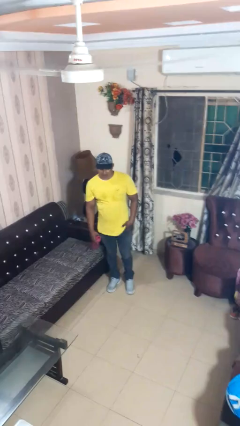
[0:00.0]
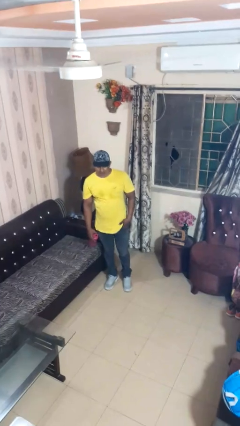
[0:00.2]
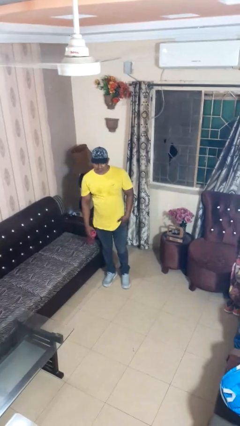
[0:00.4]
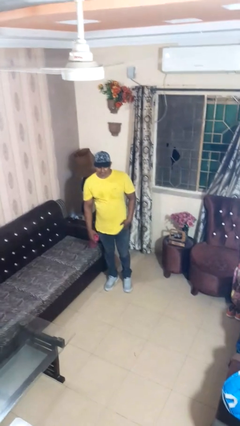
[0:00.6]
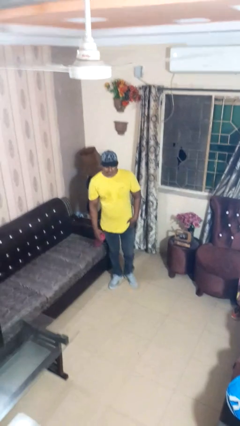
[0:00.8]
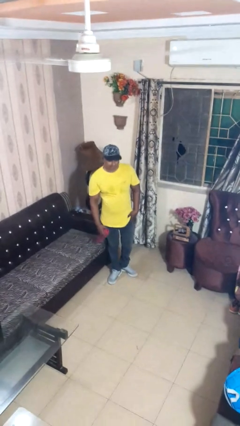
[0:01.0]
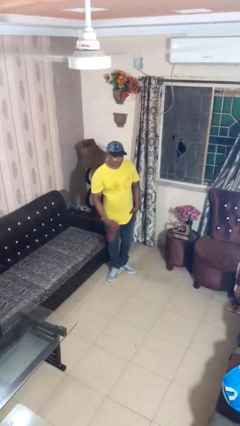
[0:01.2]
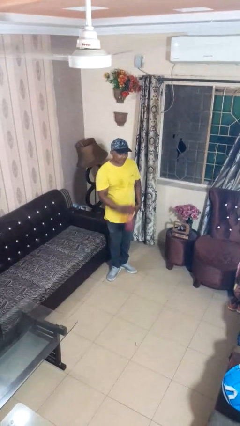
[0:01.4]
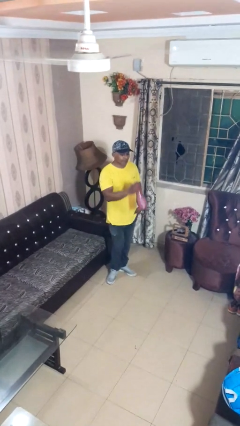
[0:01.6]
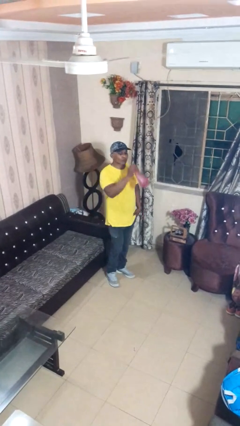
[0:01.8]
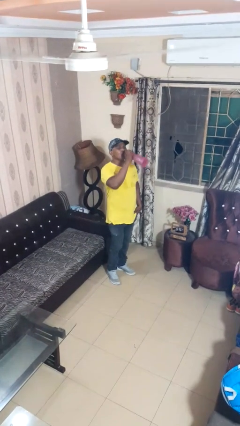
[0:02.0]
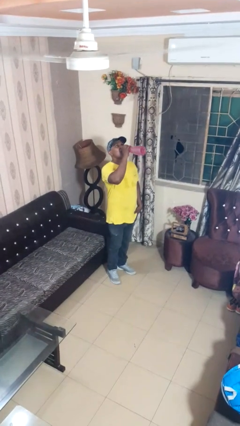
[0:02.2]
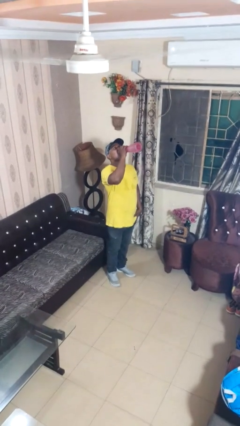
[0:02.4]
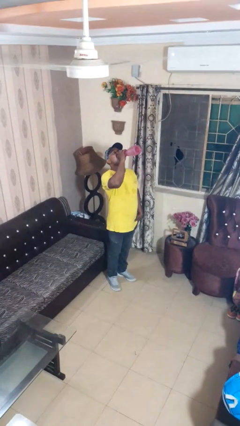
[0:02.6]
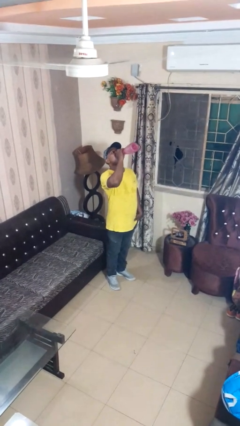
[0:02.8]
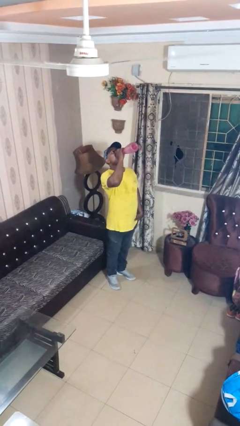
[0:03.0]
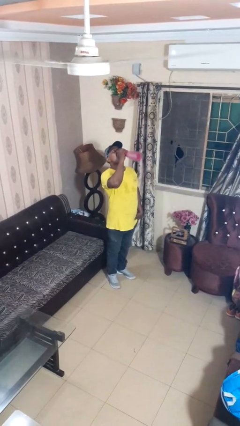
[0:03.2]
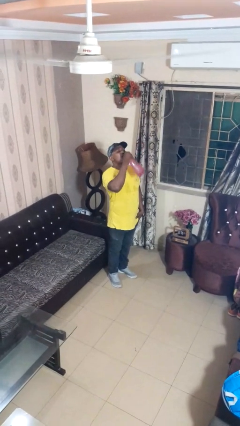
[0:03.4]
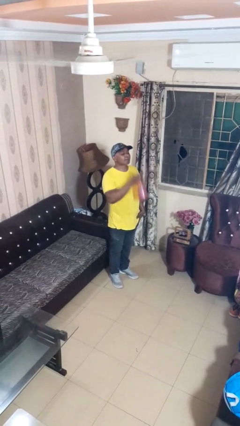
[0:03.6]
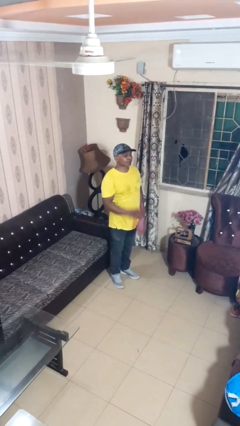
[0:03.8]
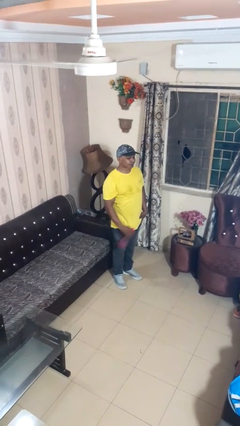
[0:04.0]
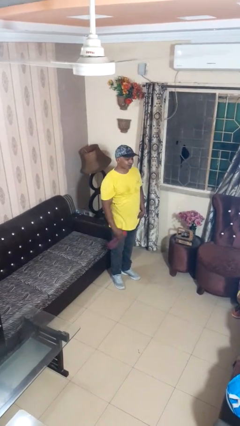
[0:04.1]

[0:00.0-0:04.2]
person drinks from bottle

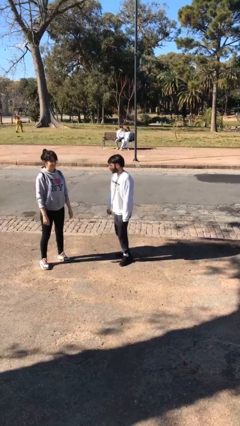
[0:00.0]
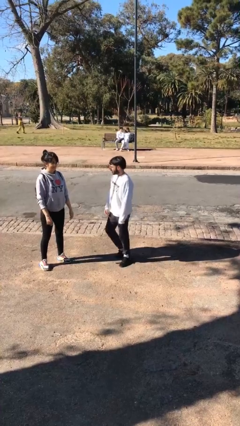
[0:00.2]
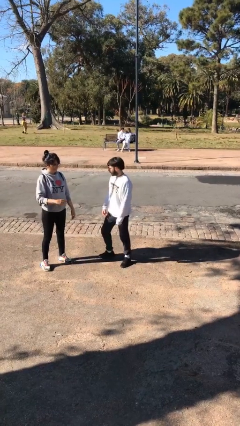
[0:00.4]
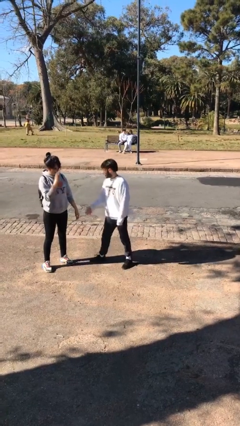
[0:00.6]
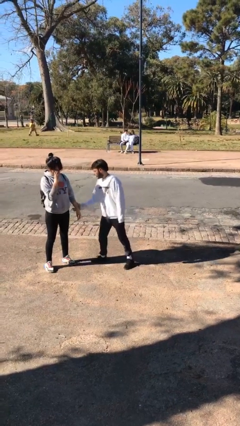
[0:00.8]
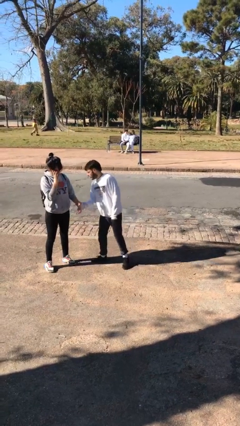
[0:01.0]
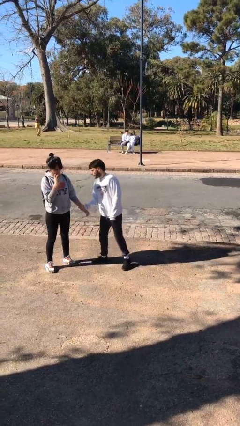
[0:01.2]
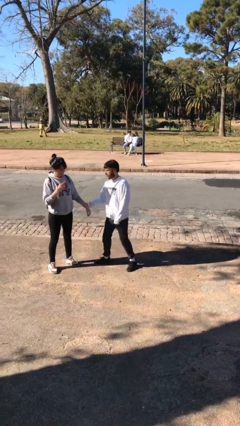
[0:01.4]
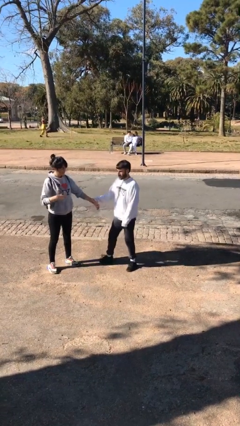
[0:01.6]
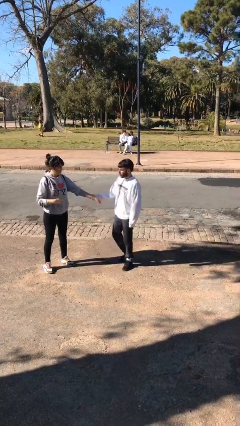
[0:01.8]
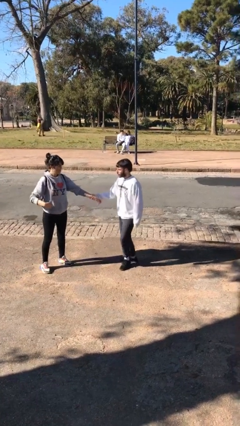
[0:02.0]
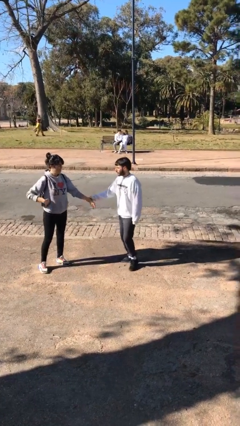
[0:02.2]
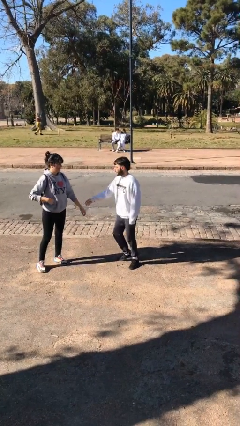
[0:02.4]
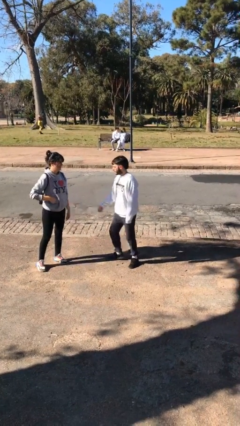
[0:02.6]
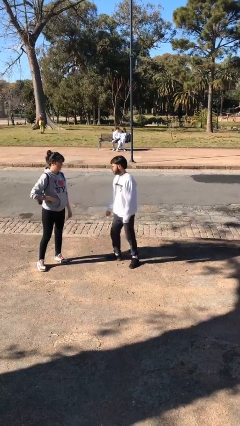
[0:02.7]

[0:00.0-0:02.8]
person grabs person by forearm

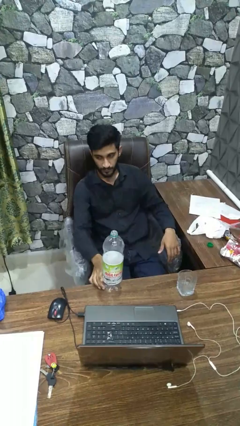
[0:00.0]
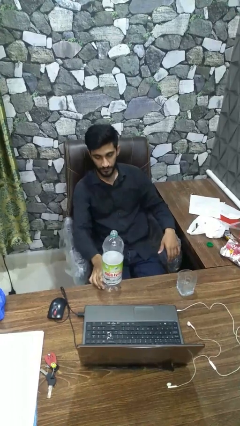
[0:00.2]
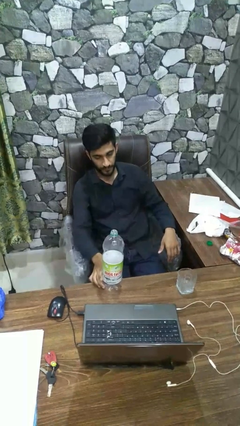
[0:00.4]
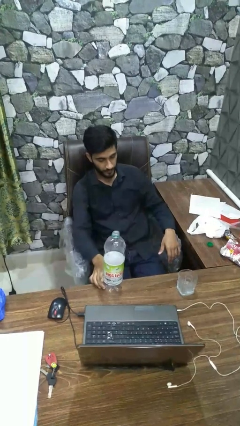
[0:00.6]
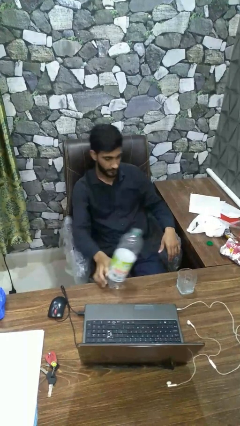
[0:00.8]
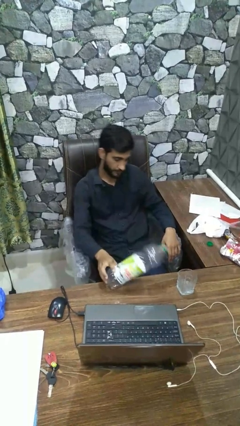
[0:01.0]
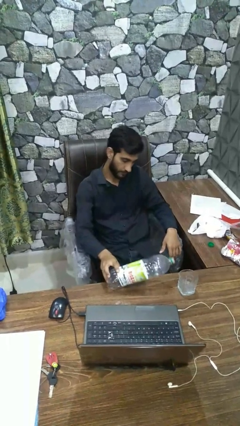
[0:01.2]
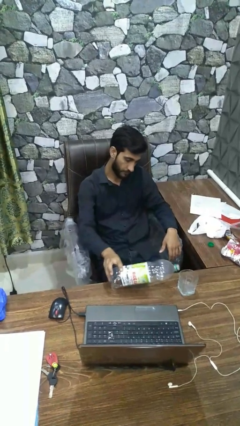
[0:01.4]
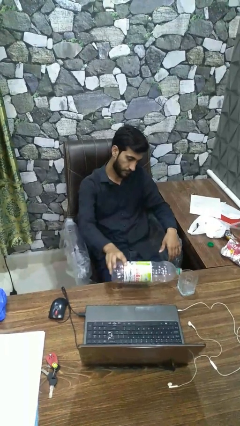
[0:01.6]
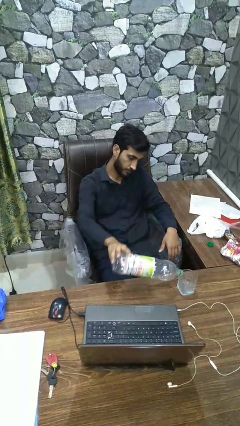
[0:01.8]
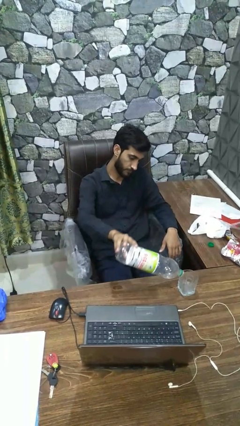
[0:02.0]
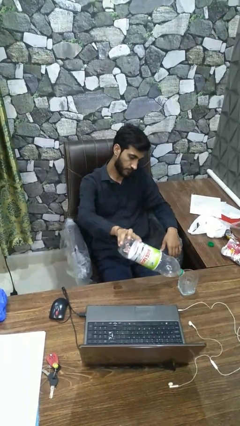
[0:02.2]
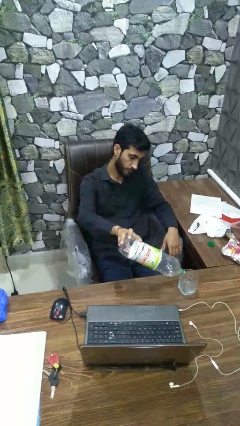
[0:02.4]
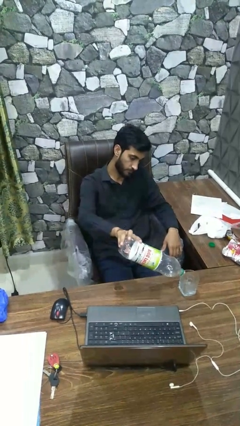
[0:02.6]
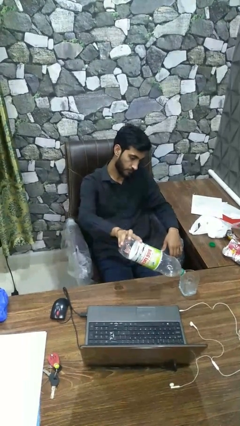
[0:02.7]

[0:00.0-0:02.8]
person pours liquid into cup

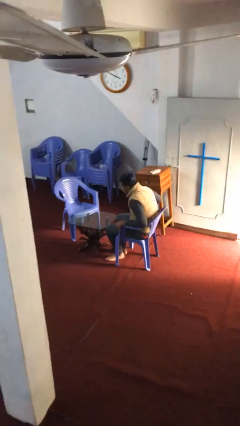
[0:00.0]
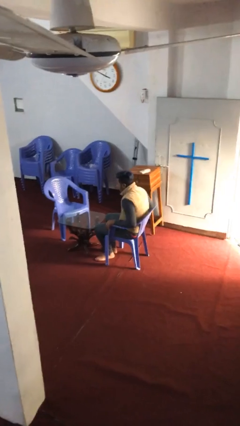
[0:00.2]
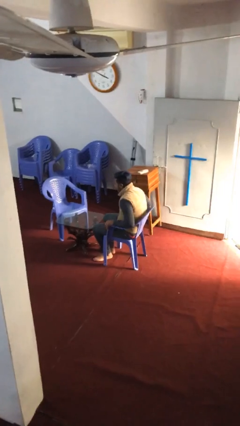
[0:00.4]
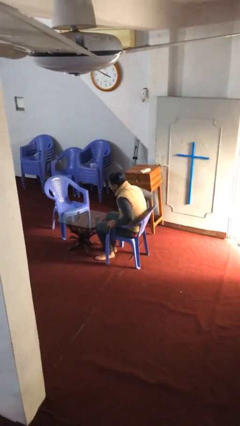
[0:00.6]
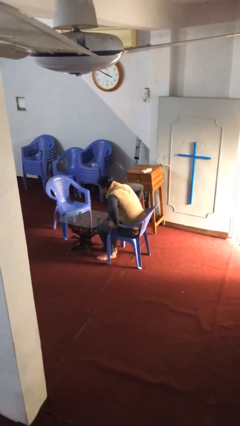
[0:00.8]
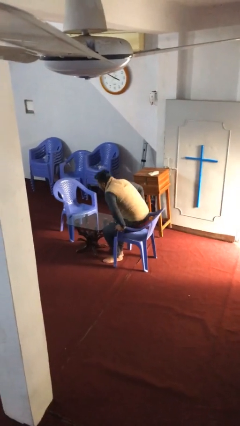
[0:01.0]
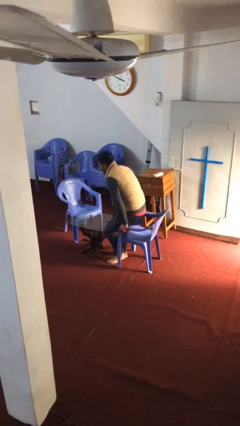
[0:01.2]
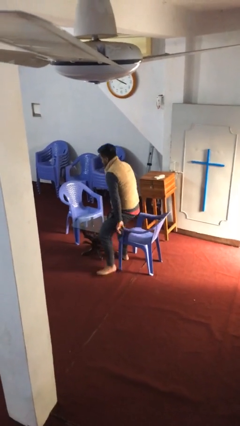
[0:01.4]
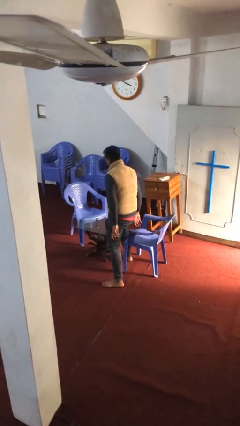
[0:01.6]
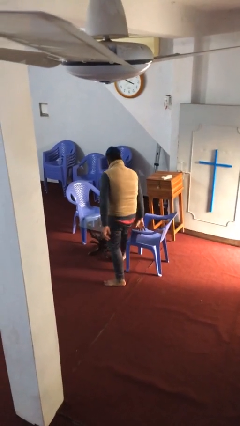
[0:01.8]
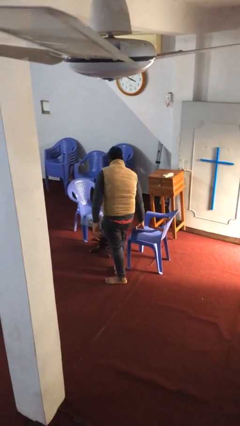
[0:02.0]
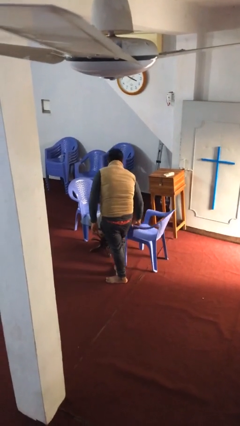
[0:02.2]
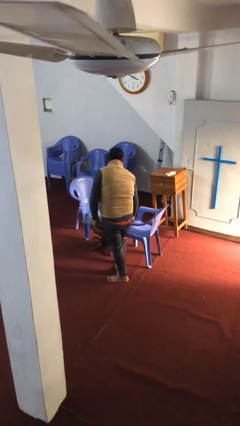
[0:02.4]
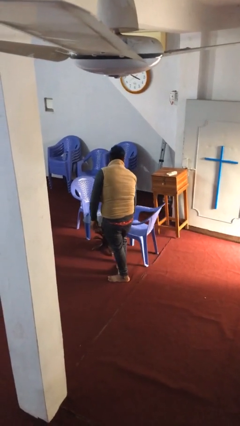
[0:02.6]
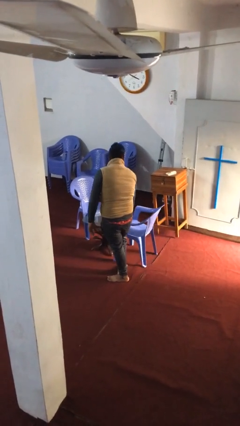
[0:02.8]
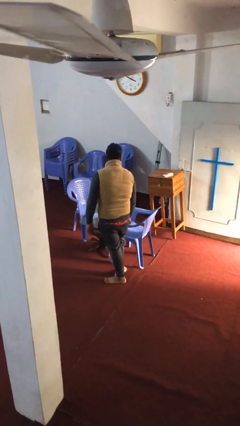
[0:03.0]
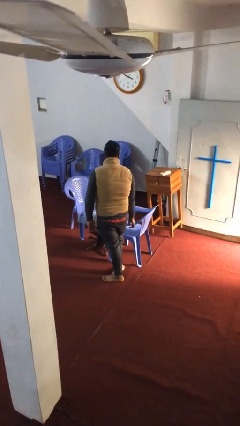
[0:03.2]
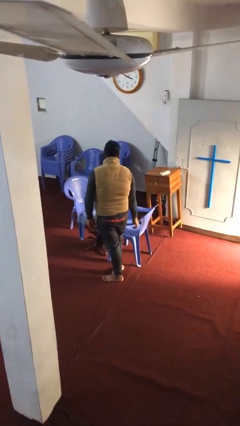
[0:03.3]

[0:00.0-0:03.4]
person stands up

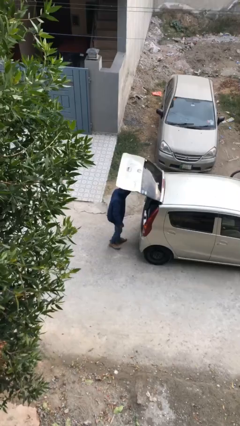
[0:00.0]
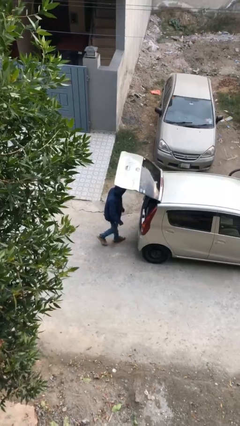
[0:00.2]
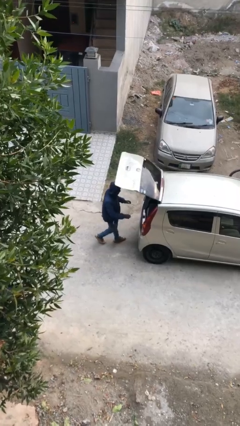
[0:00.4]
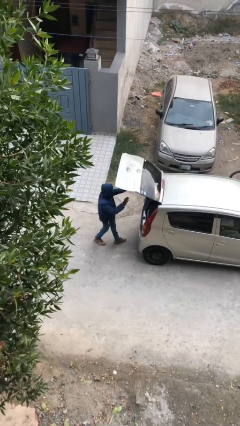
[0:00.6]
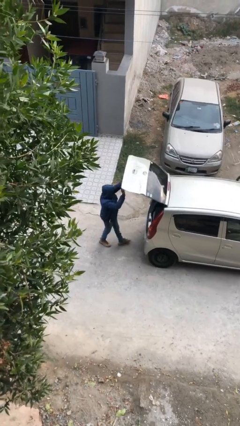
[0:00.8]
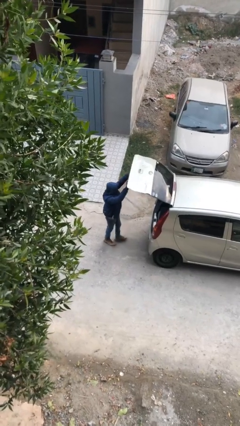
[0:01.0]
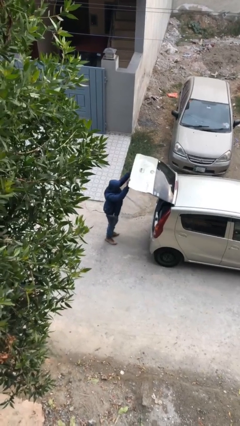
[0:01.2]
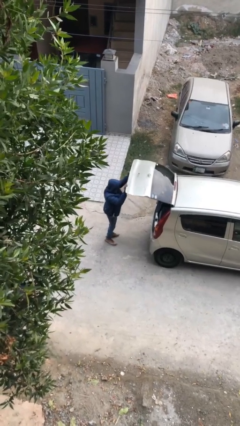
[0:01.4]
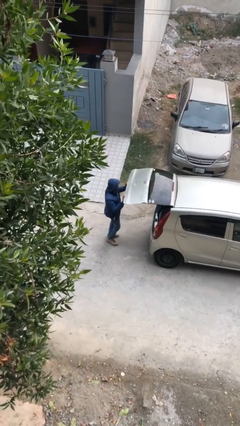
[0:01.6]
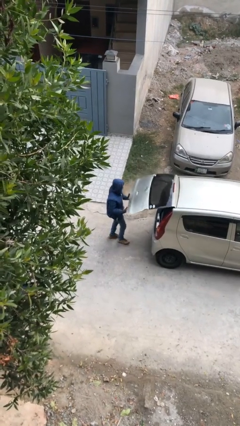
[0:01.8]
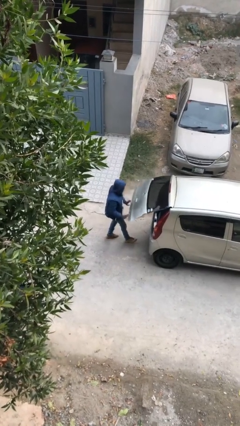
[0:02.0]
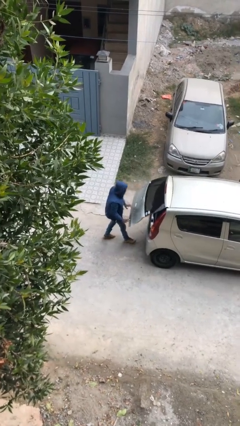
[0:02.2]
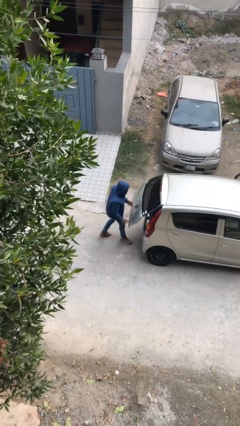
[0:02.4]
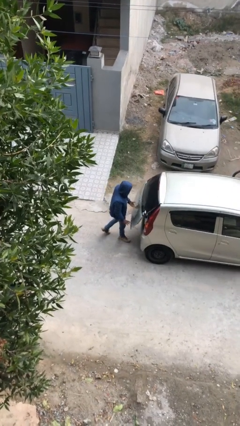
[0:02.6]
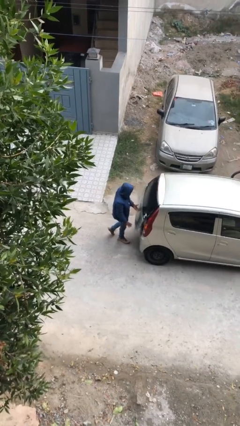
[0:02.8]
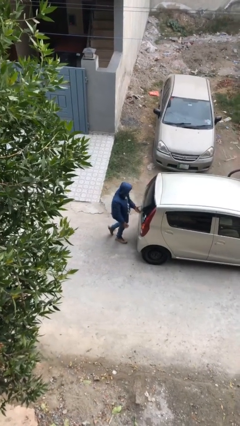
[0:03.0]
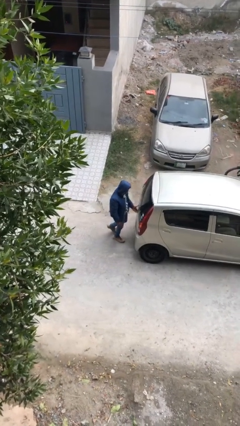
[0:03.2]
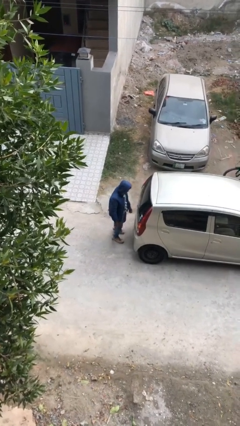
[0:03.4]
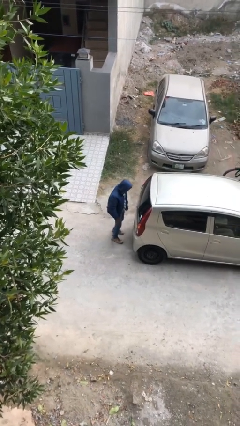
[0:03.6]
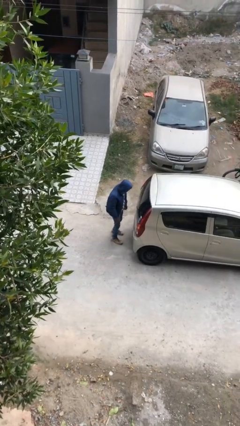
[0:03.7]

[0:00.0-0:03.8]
person closes car trunk

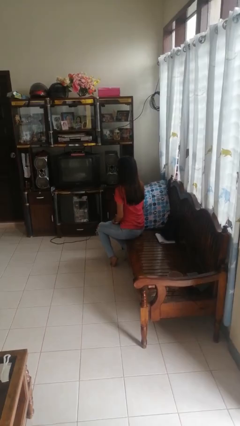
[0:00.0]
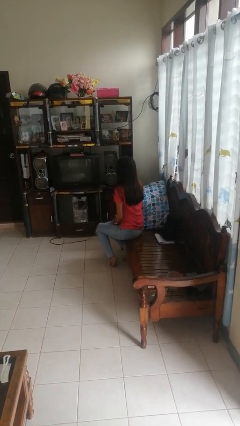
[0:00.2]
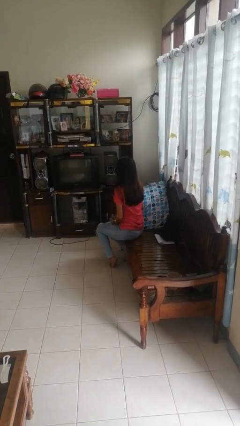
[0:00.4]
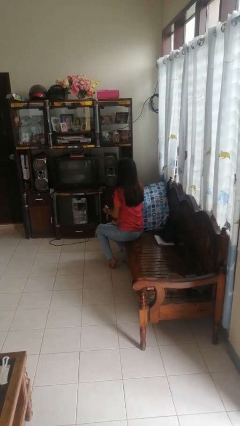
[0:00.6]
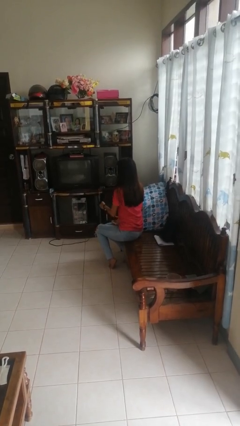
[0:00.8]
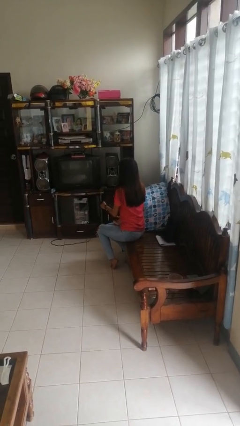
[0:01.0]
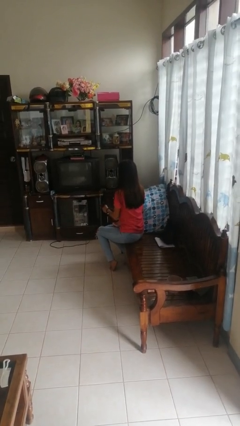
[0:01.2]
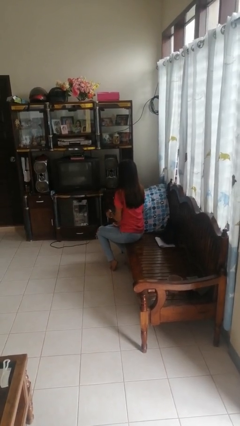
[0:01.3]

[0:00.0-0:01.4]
person uses television remote
